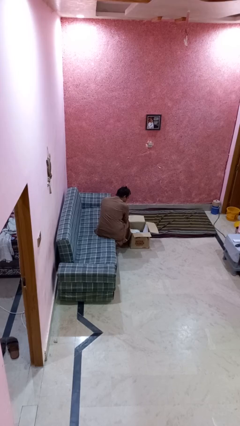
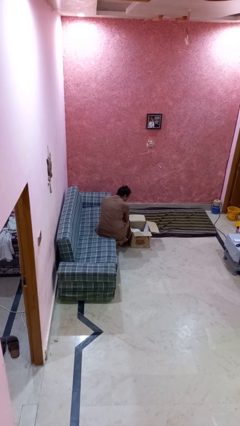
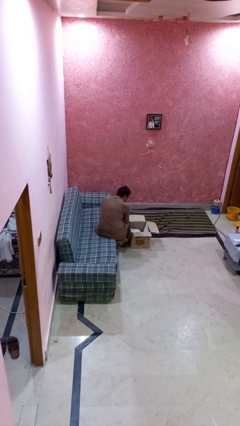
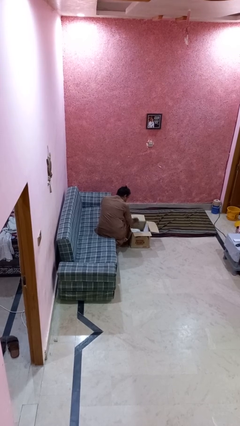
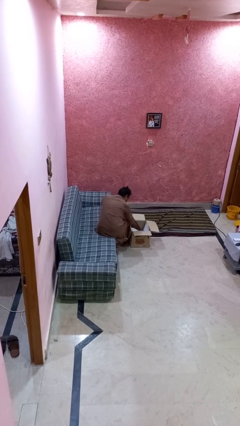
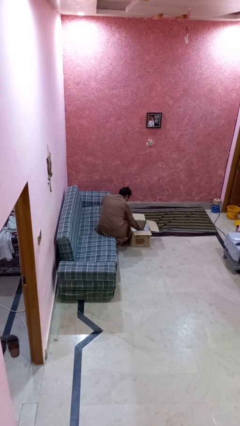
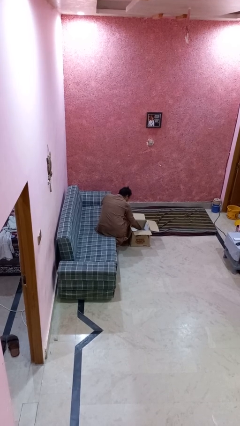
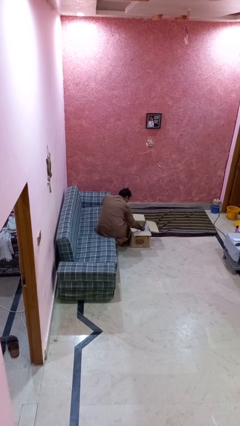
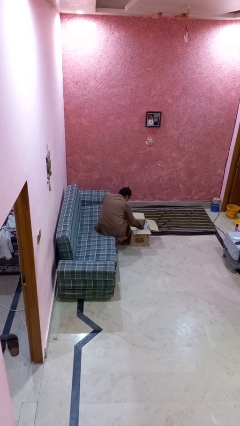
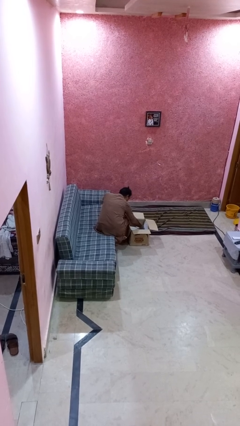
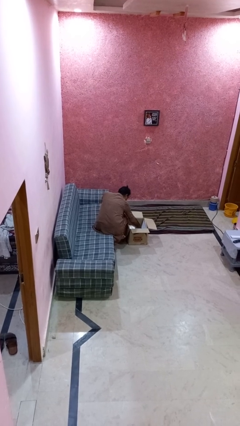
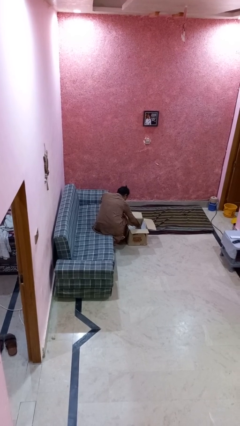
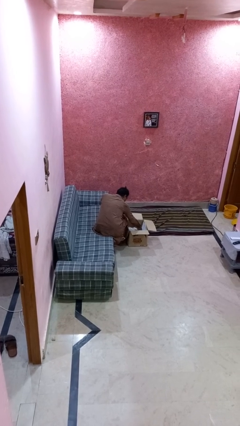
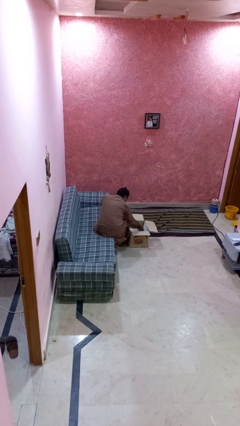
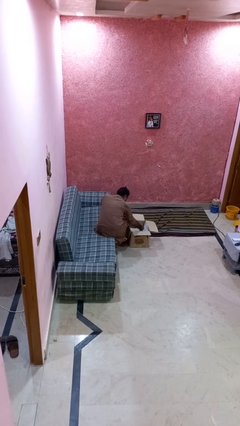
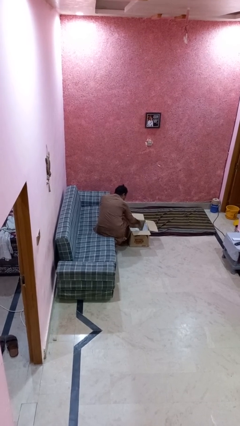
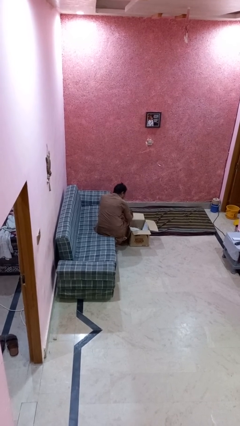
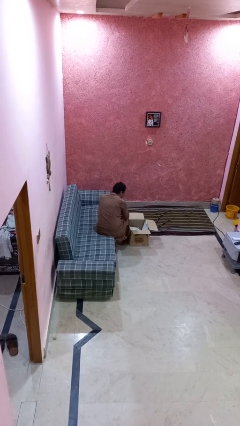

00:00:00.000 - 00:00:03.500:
person searches in box

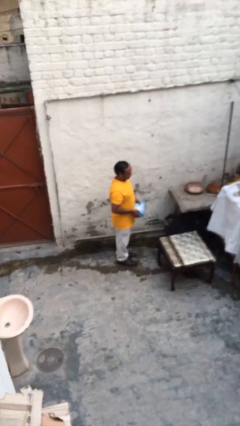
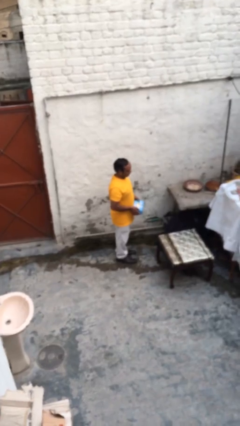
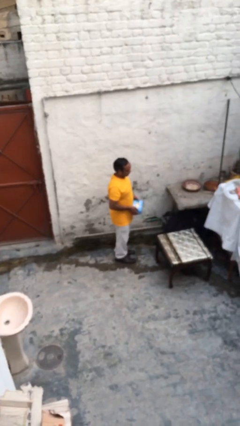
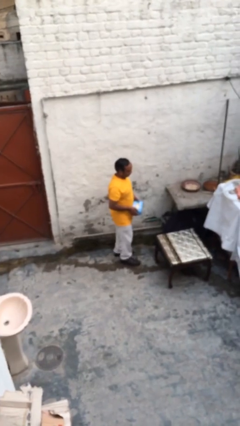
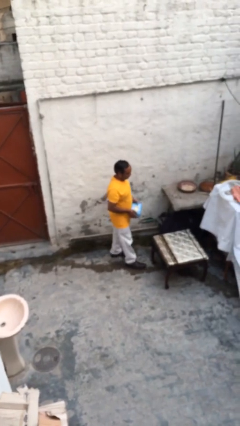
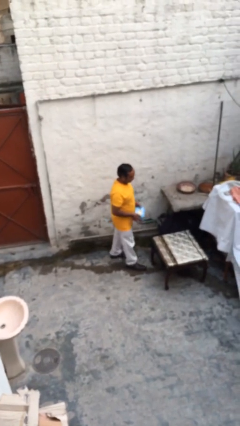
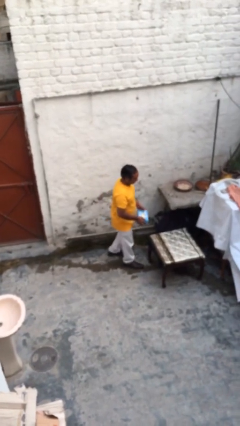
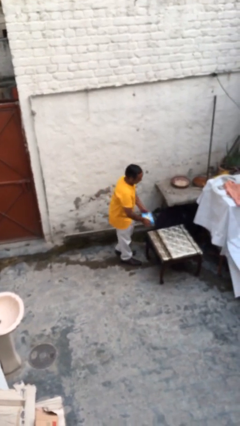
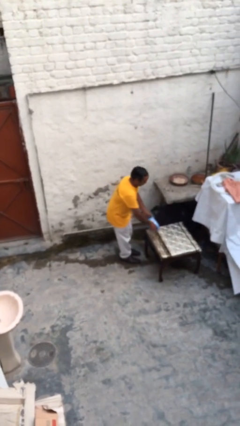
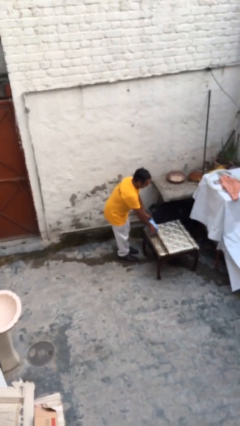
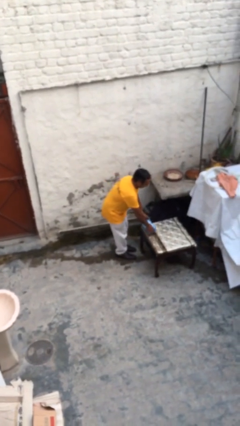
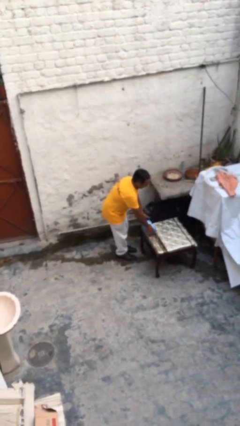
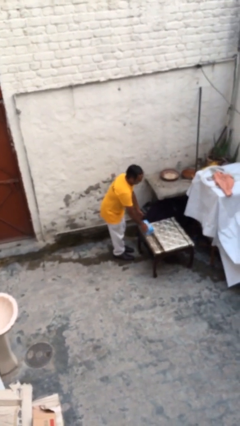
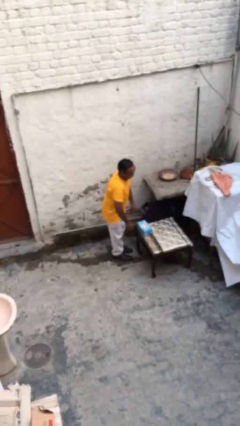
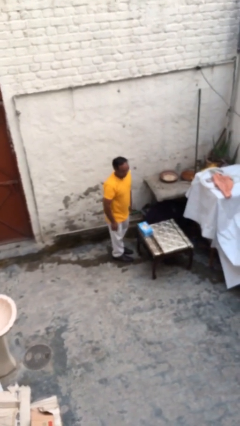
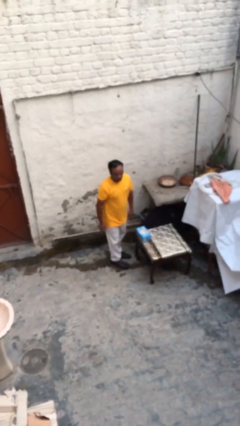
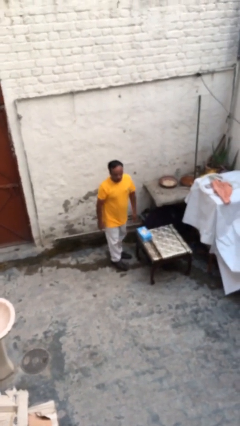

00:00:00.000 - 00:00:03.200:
person puts down object on table

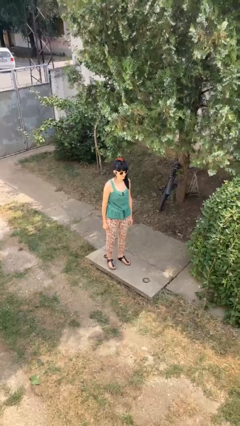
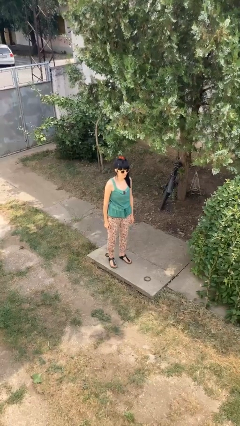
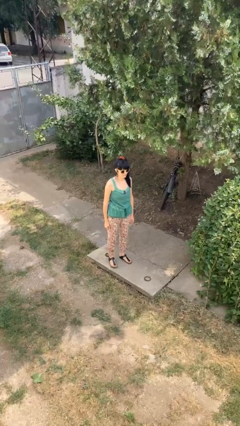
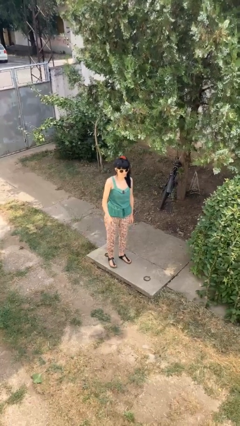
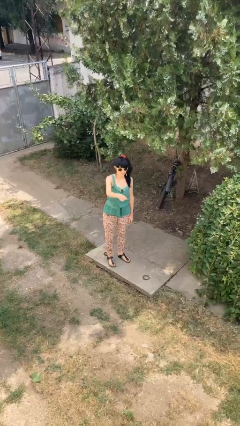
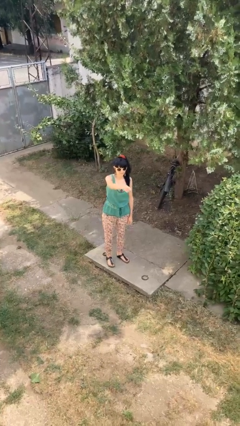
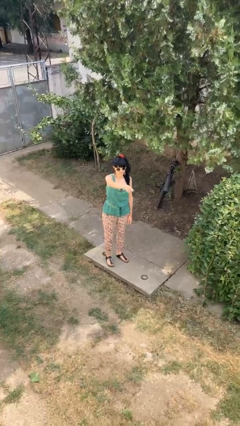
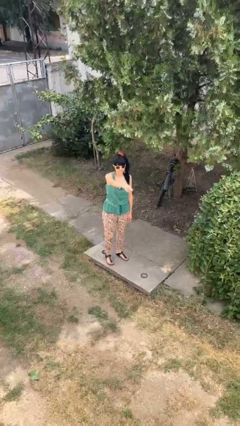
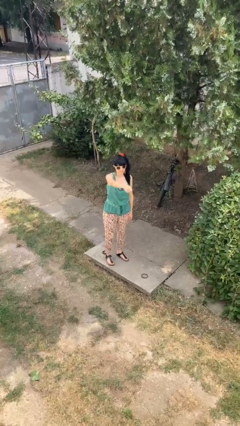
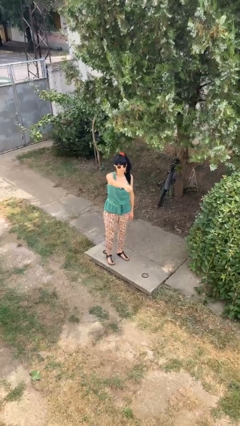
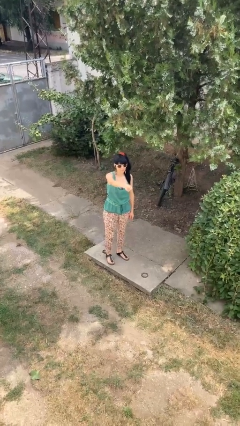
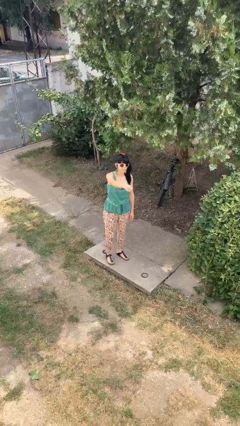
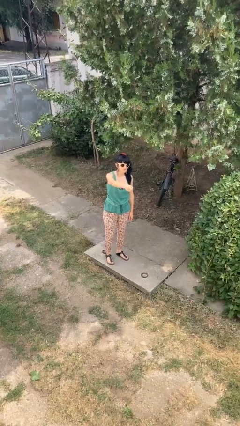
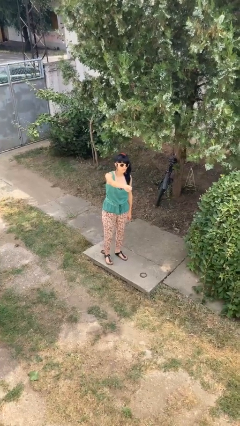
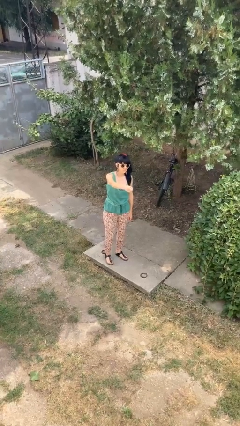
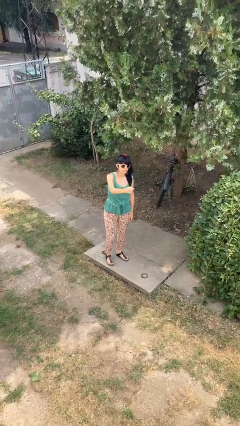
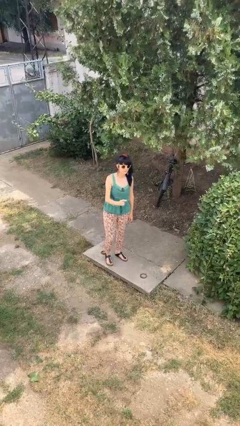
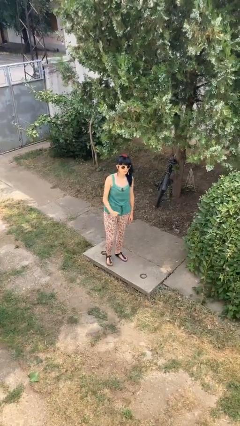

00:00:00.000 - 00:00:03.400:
person points at person

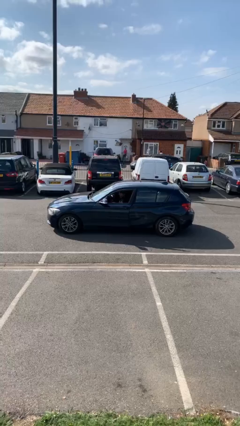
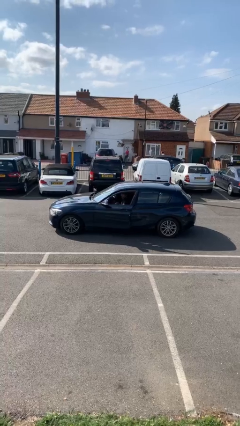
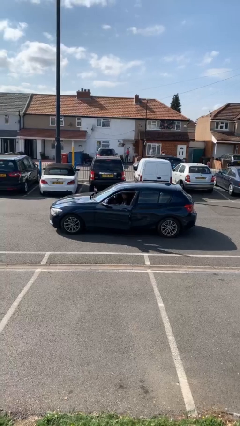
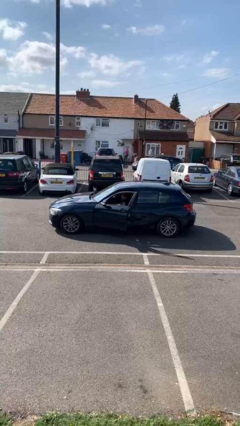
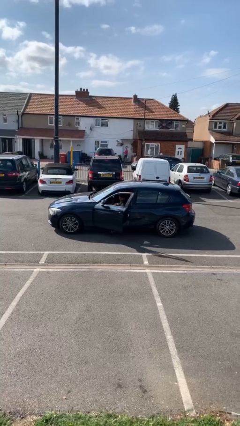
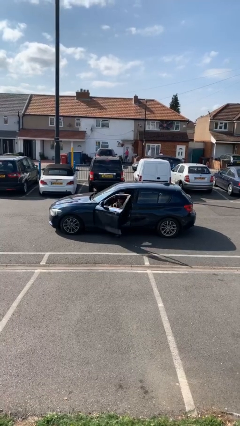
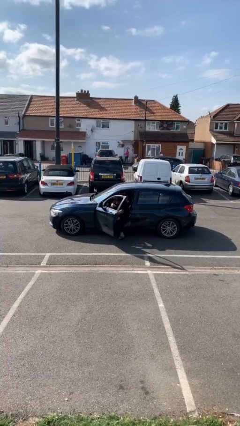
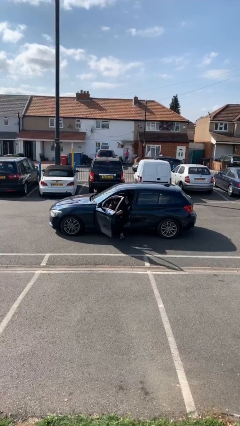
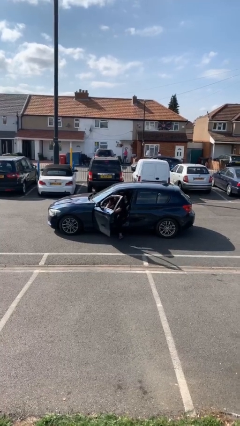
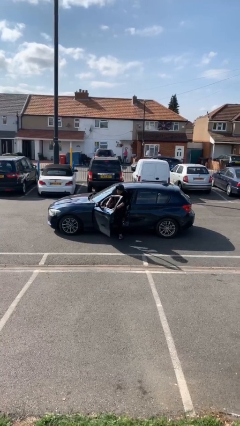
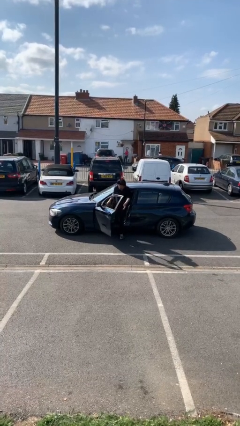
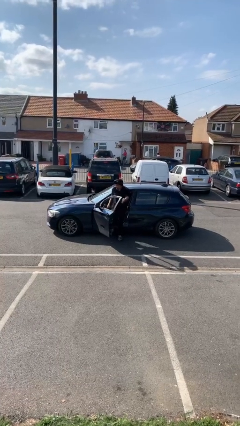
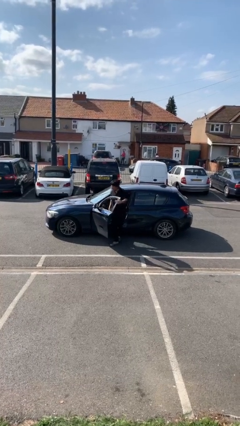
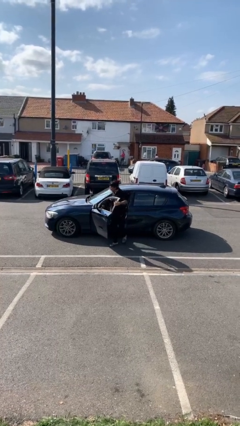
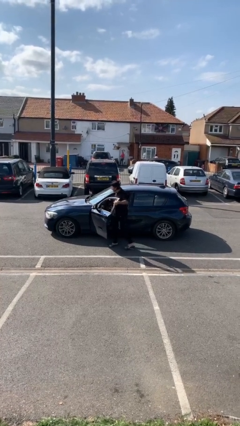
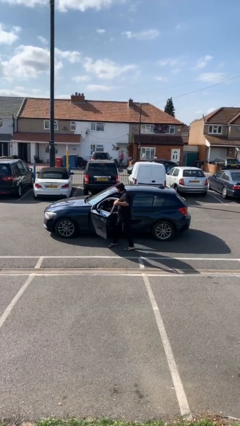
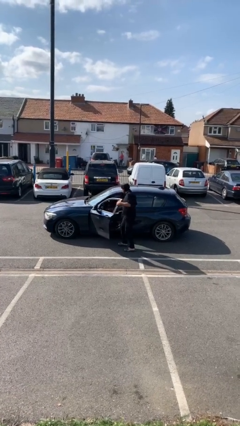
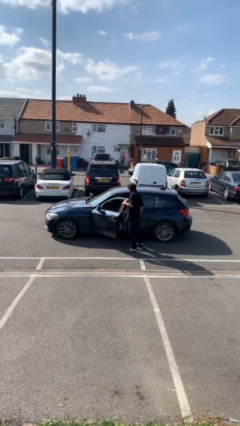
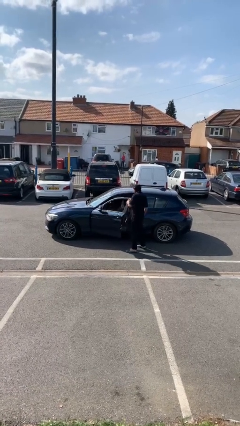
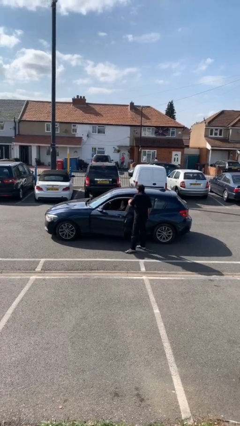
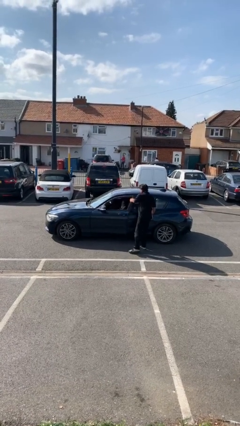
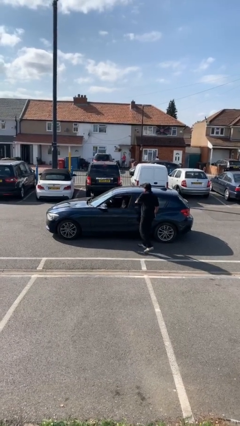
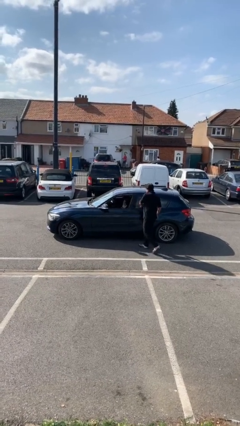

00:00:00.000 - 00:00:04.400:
car drops off person

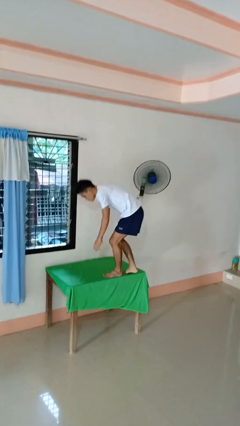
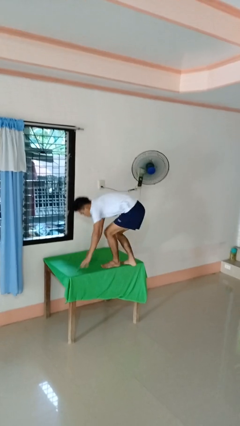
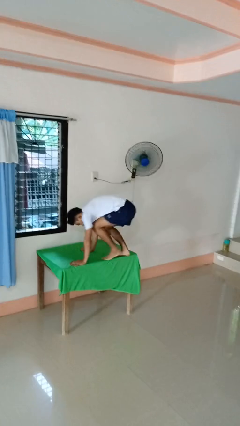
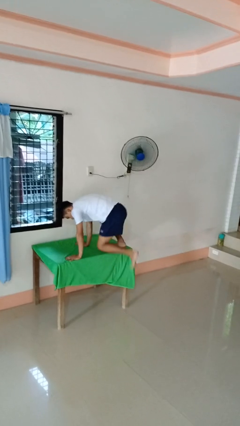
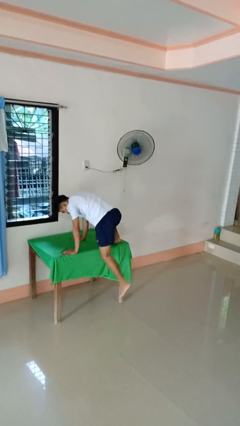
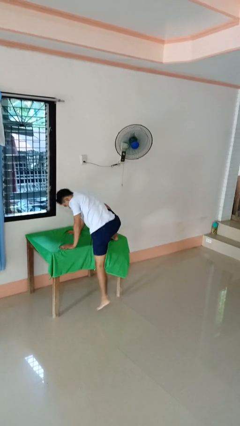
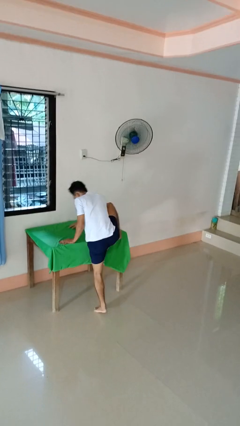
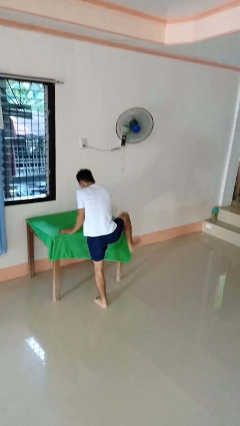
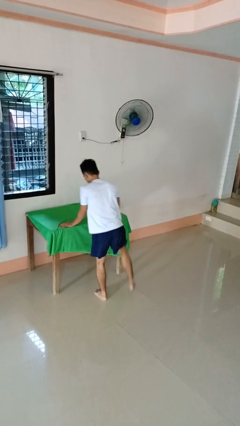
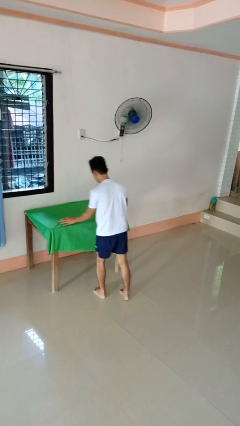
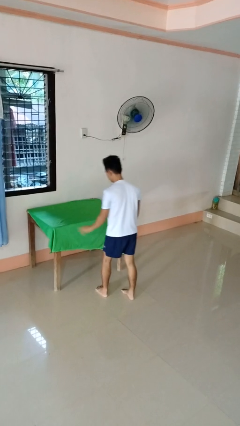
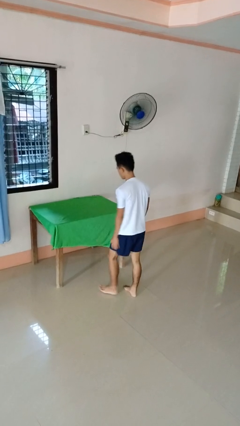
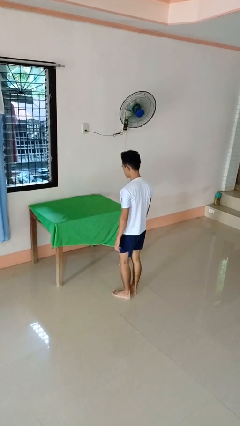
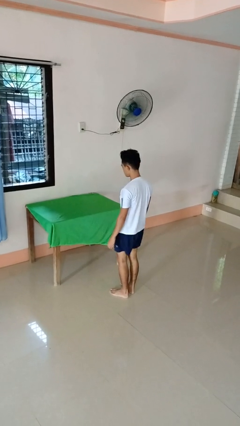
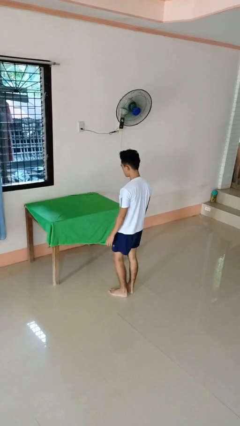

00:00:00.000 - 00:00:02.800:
person climbs off table
